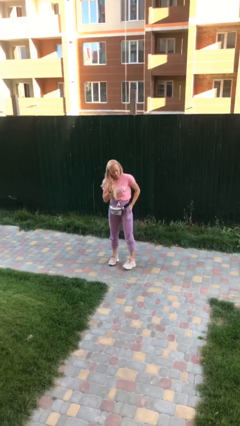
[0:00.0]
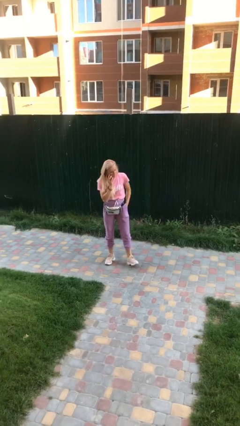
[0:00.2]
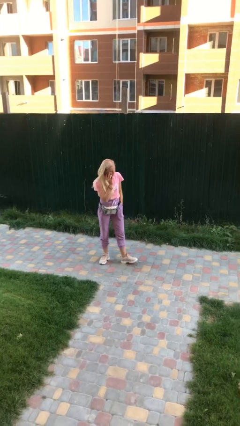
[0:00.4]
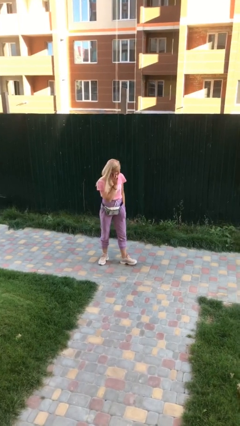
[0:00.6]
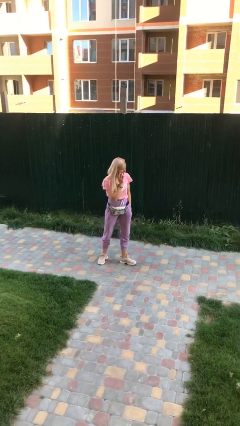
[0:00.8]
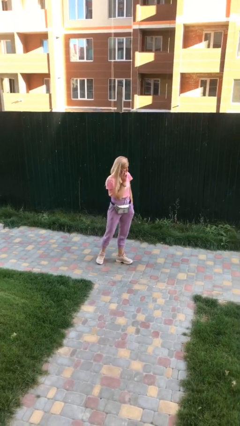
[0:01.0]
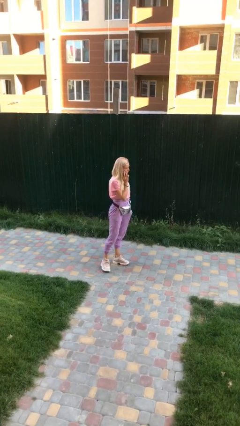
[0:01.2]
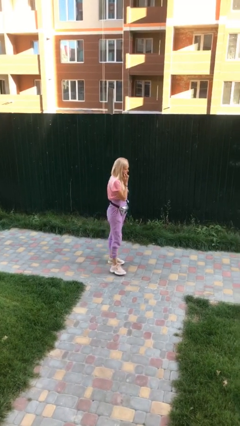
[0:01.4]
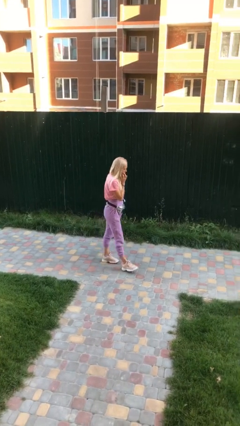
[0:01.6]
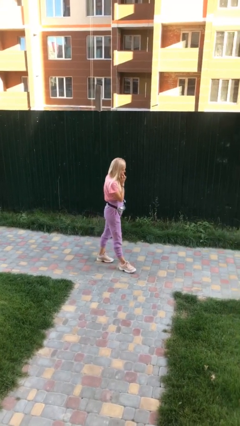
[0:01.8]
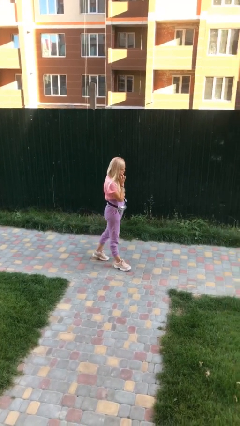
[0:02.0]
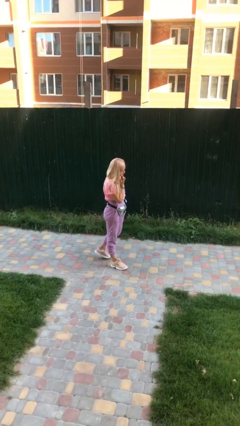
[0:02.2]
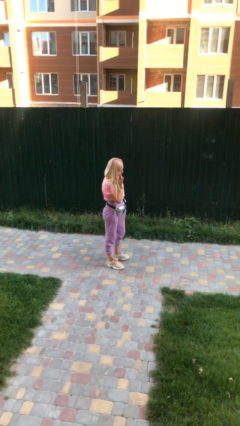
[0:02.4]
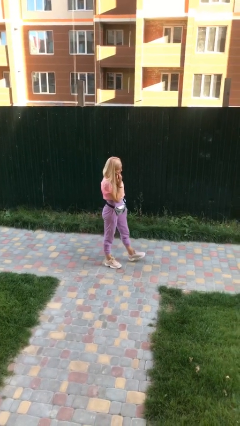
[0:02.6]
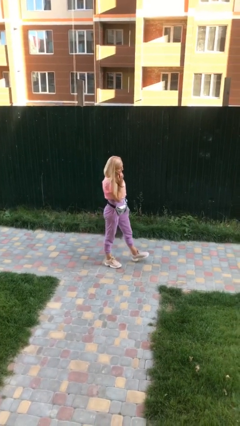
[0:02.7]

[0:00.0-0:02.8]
person talks on phone

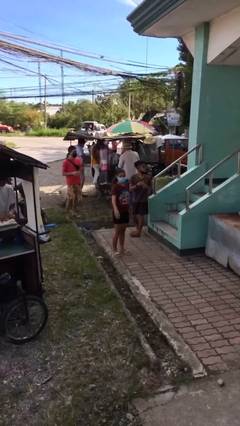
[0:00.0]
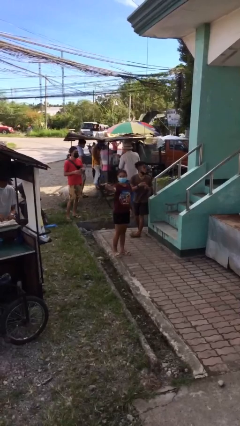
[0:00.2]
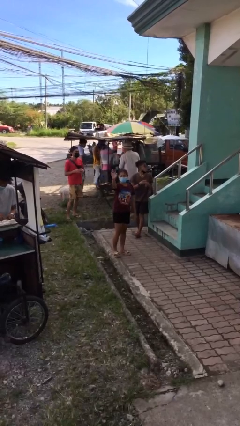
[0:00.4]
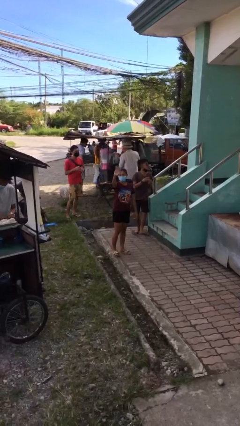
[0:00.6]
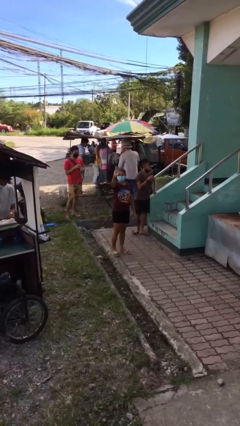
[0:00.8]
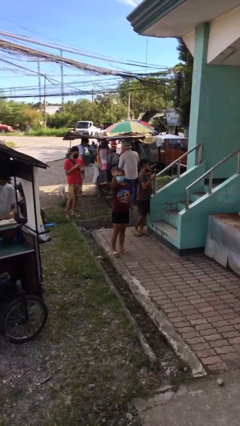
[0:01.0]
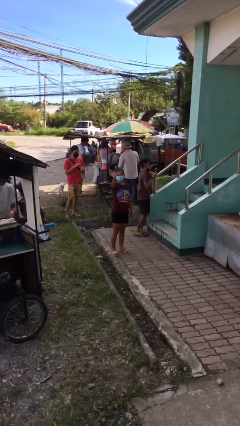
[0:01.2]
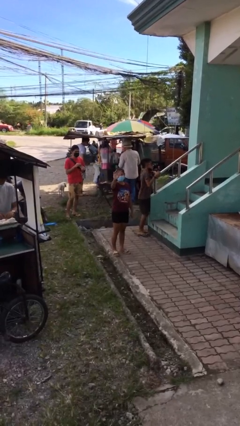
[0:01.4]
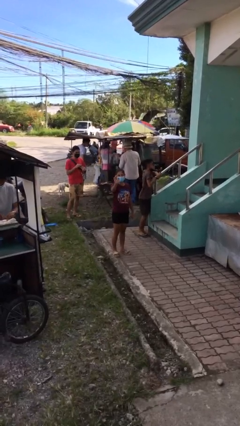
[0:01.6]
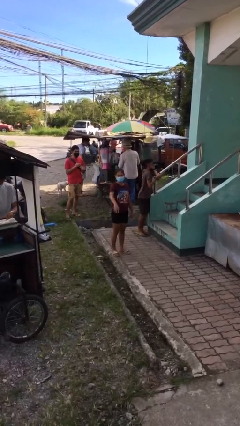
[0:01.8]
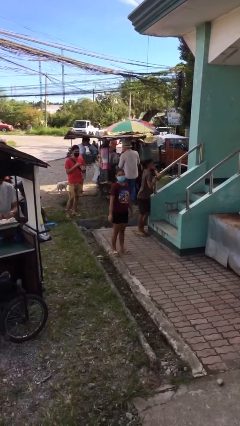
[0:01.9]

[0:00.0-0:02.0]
person waves at person

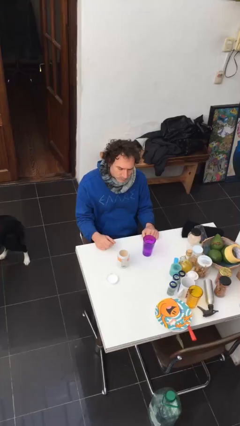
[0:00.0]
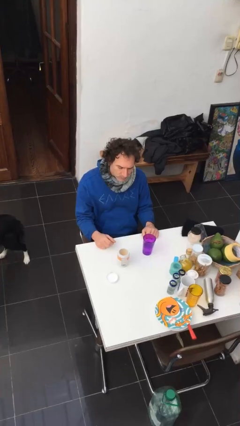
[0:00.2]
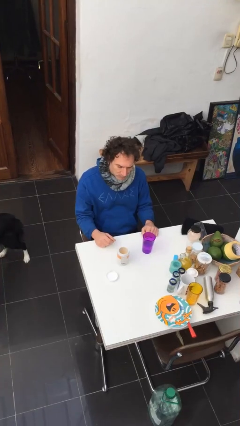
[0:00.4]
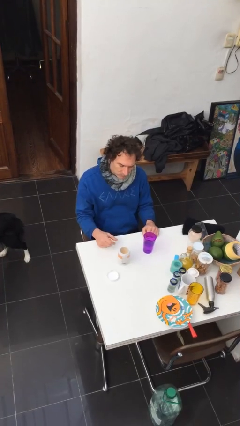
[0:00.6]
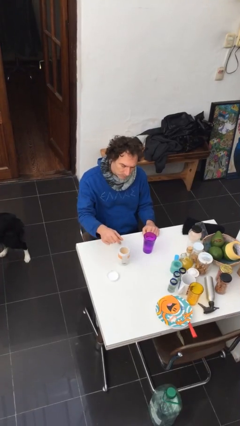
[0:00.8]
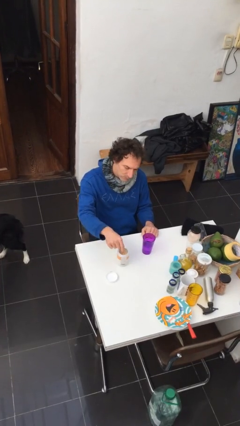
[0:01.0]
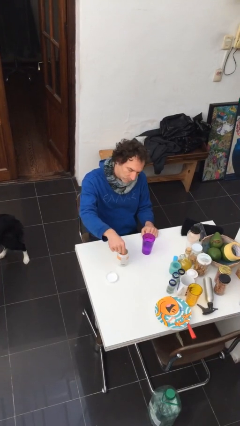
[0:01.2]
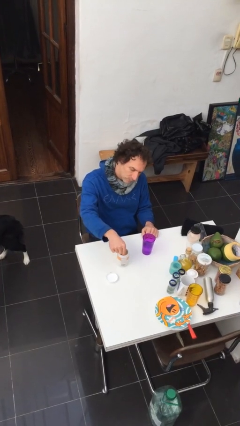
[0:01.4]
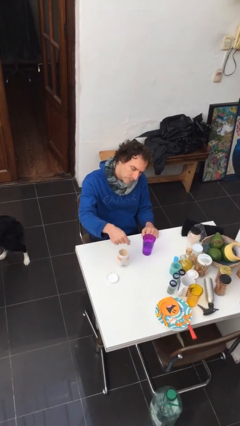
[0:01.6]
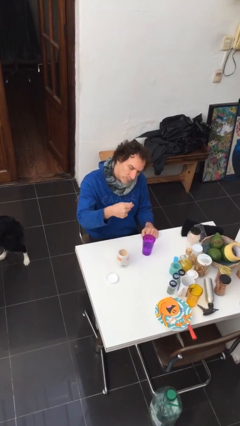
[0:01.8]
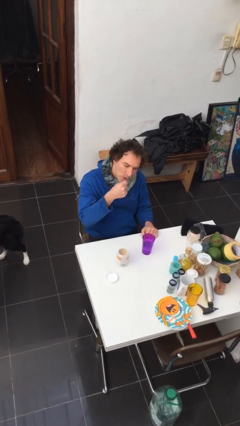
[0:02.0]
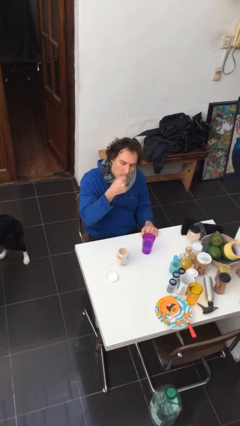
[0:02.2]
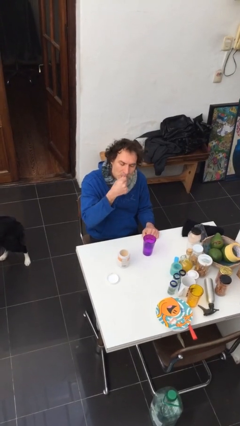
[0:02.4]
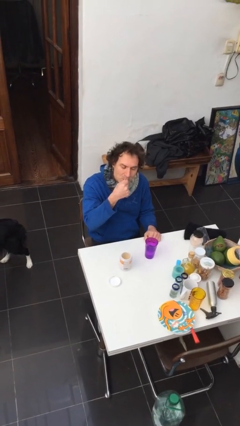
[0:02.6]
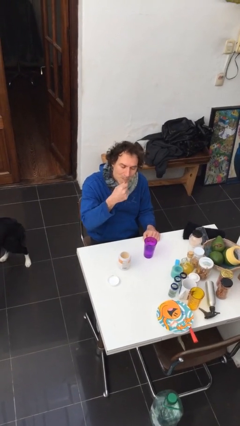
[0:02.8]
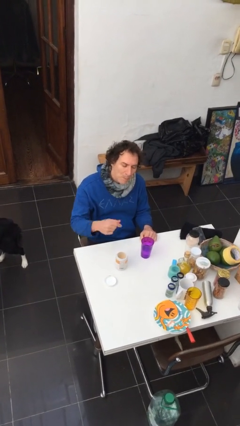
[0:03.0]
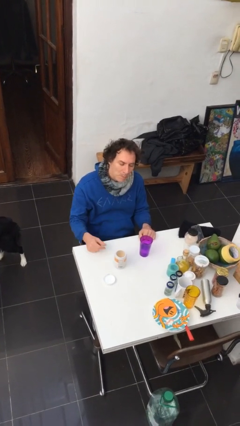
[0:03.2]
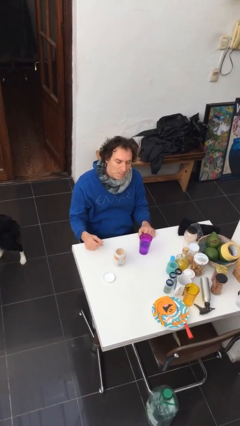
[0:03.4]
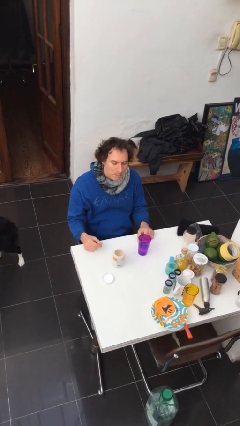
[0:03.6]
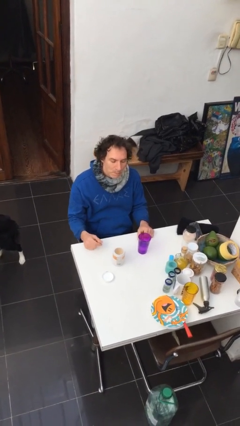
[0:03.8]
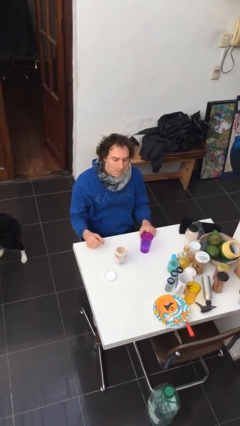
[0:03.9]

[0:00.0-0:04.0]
person takes medicine pills

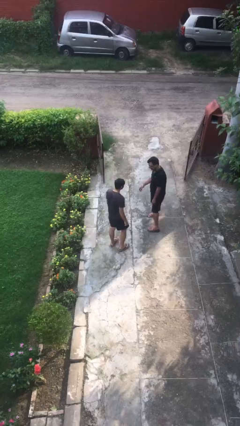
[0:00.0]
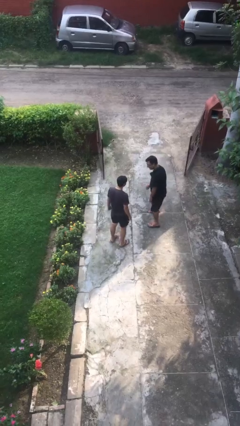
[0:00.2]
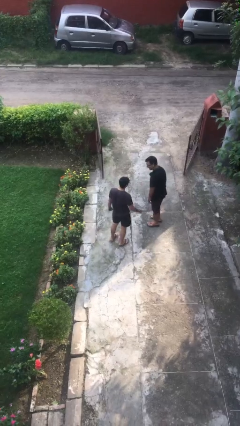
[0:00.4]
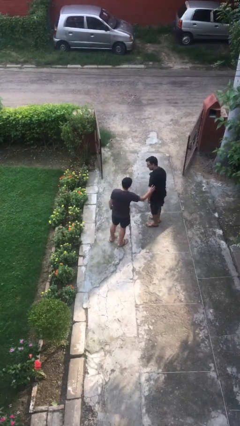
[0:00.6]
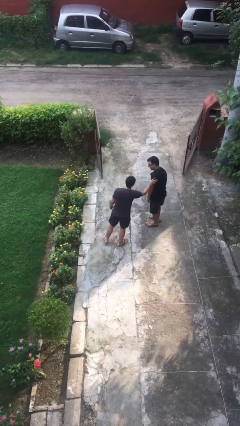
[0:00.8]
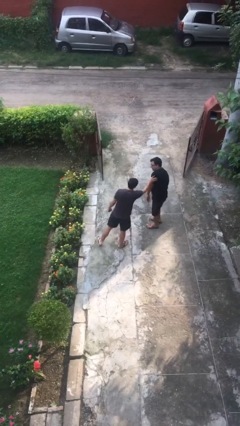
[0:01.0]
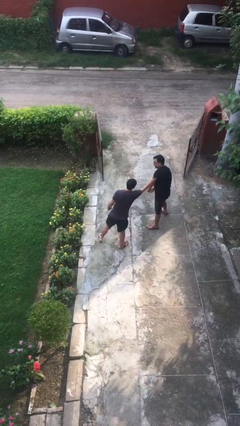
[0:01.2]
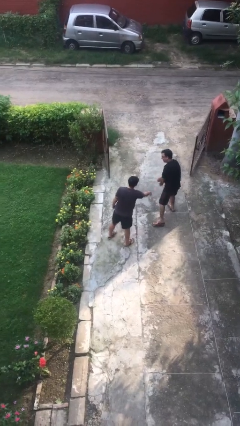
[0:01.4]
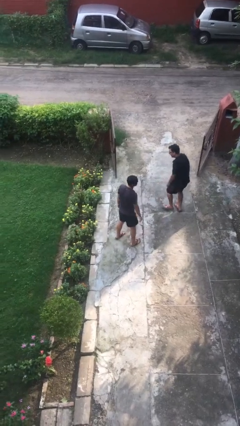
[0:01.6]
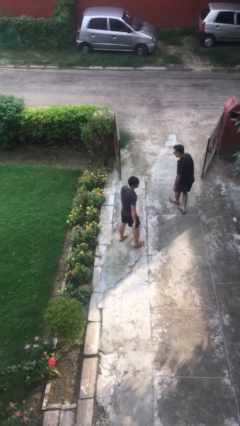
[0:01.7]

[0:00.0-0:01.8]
person shoves person

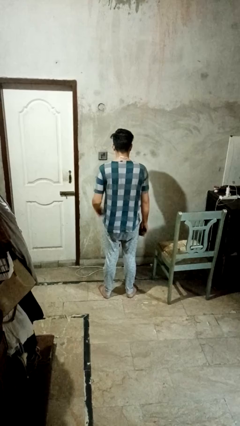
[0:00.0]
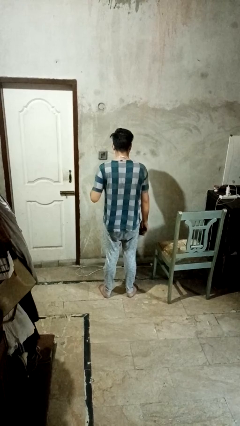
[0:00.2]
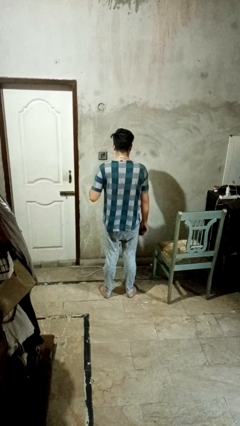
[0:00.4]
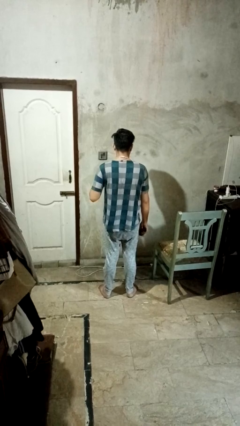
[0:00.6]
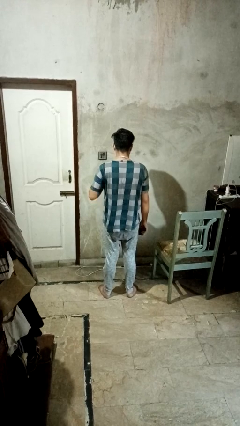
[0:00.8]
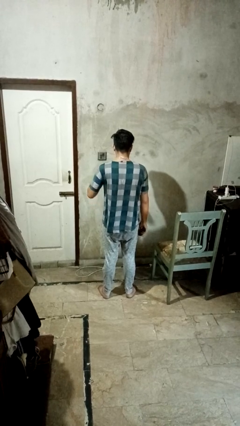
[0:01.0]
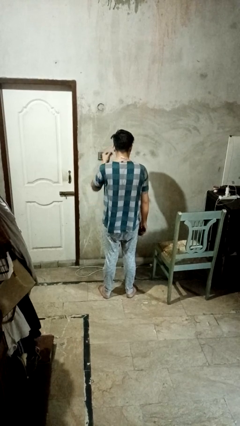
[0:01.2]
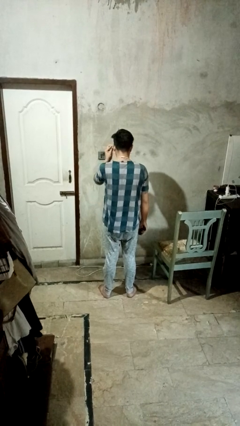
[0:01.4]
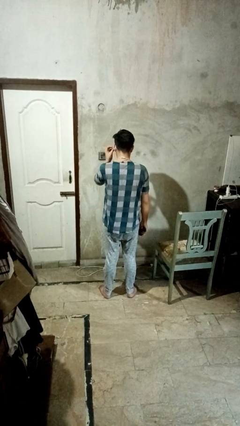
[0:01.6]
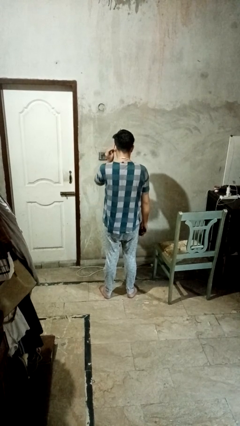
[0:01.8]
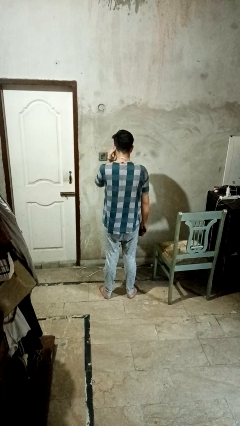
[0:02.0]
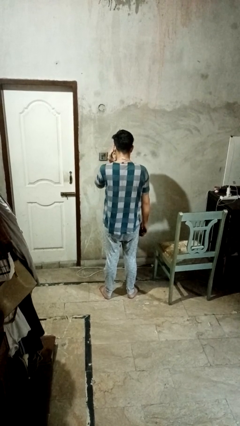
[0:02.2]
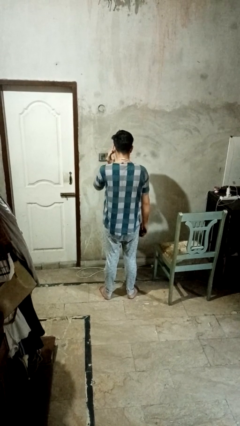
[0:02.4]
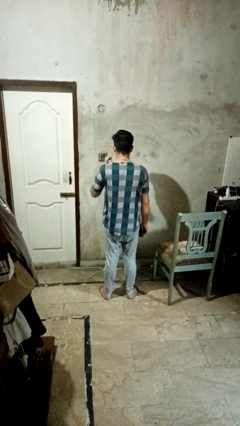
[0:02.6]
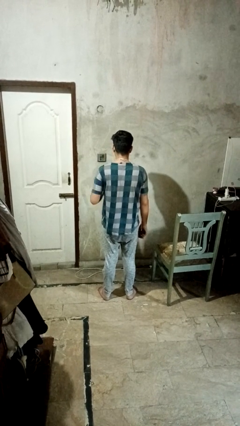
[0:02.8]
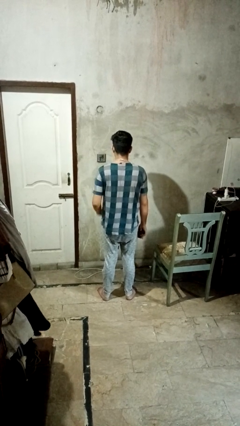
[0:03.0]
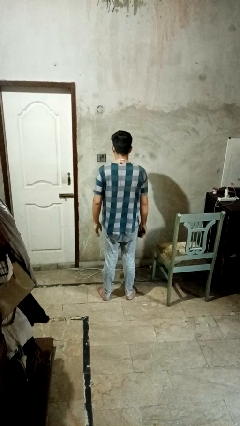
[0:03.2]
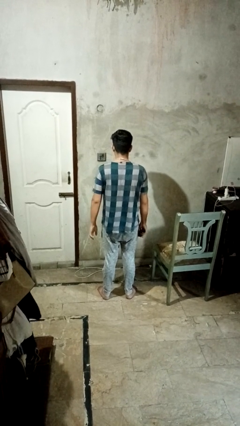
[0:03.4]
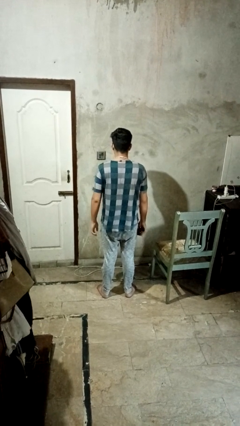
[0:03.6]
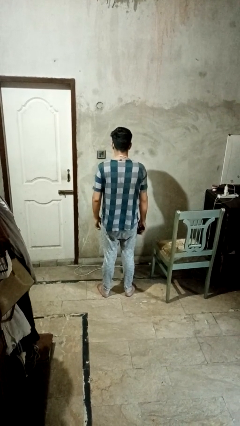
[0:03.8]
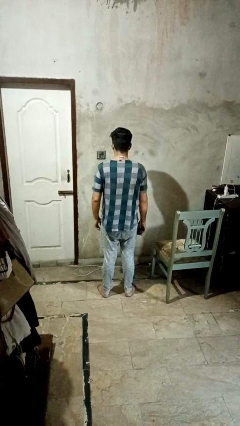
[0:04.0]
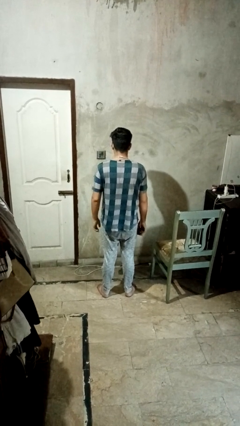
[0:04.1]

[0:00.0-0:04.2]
person puts on headphones

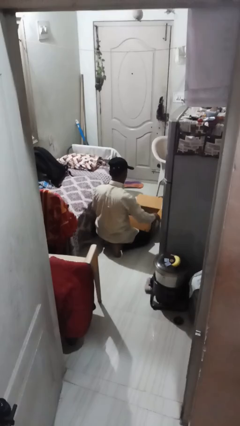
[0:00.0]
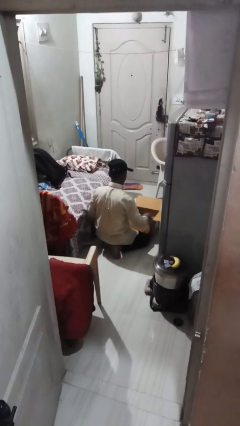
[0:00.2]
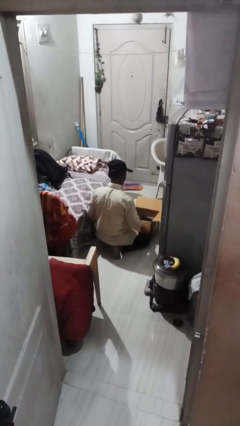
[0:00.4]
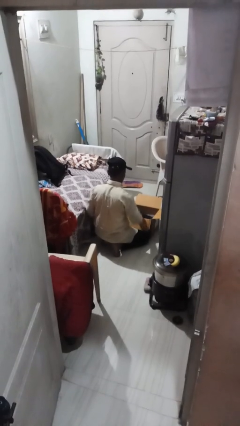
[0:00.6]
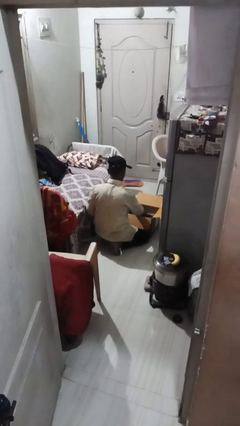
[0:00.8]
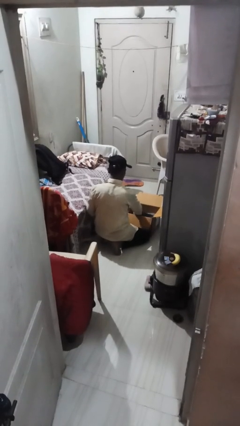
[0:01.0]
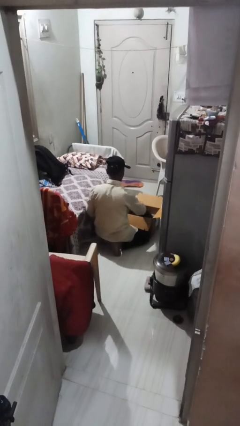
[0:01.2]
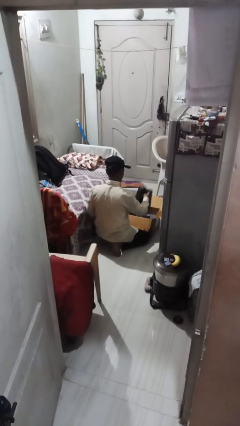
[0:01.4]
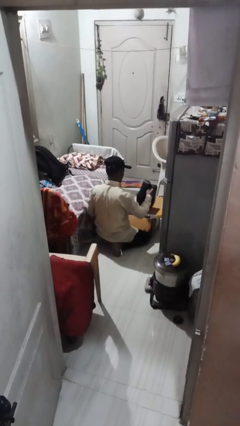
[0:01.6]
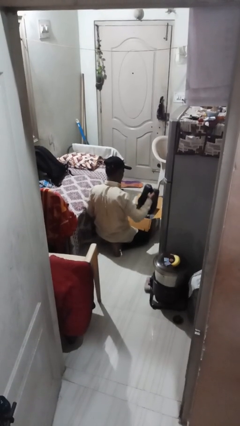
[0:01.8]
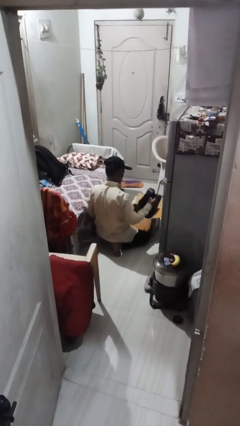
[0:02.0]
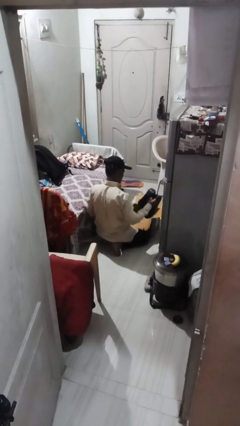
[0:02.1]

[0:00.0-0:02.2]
person takes object from box
